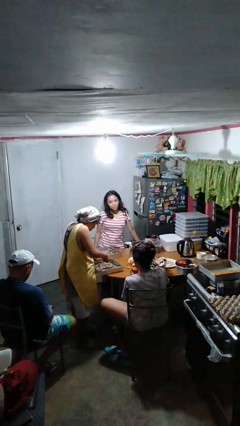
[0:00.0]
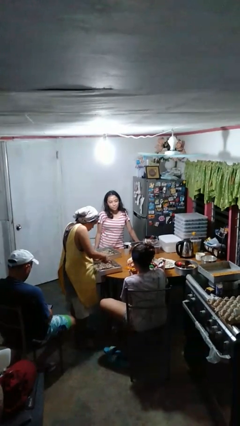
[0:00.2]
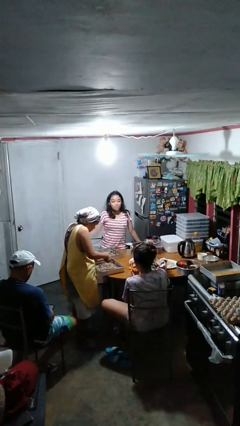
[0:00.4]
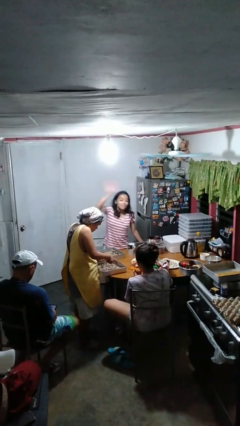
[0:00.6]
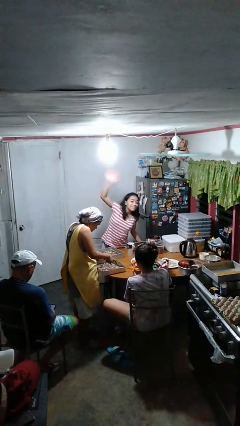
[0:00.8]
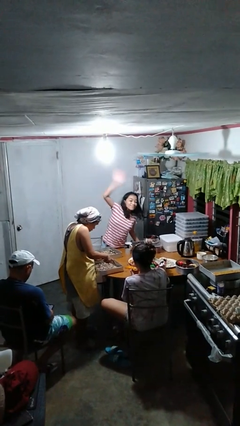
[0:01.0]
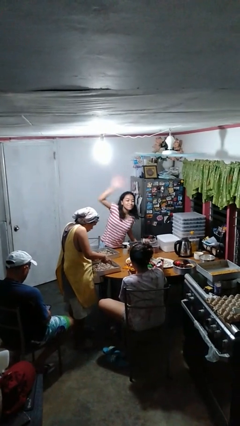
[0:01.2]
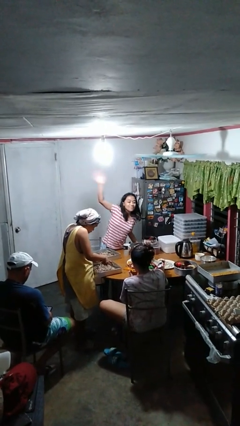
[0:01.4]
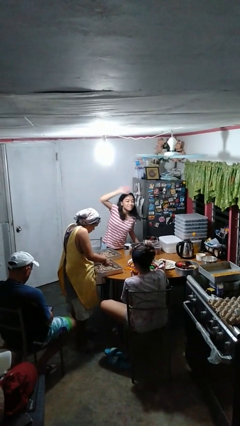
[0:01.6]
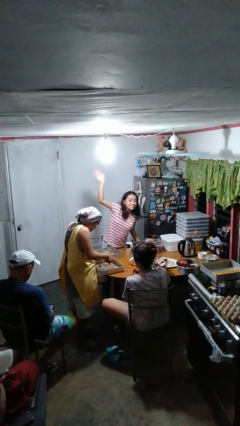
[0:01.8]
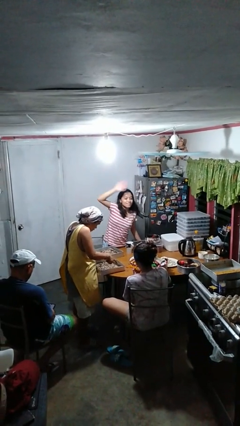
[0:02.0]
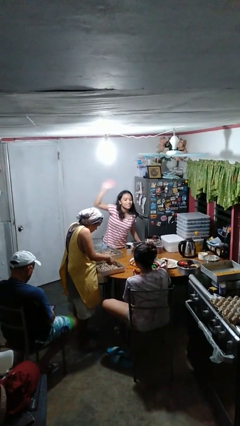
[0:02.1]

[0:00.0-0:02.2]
person waves at person

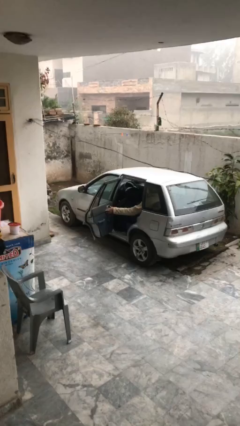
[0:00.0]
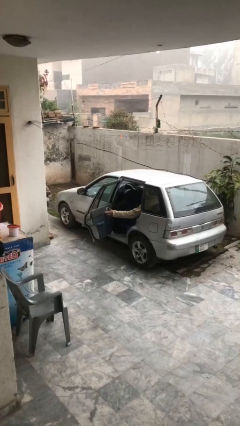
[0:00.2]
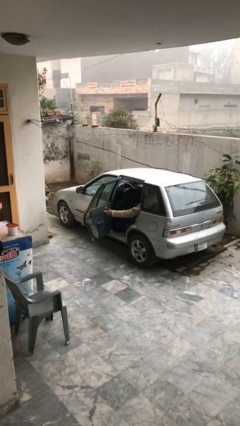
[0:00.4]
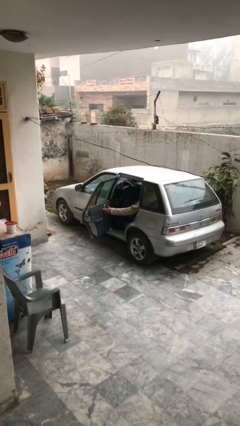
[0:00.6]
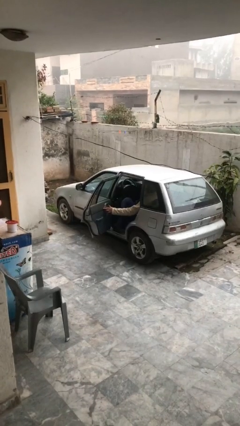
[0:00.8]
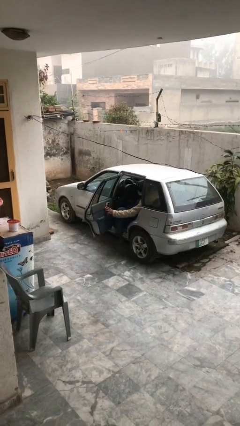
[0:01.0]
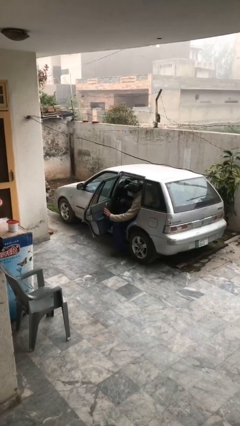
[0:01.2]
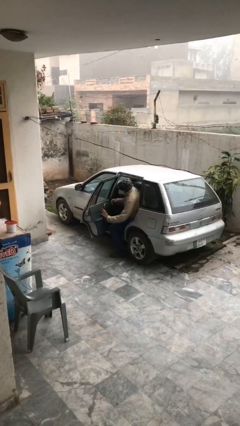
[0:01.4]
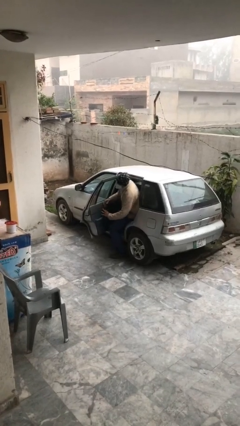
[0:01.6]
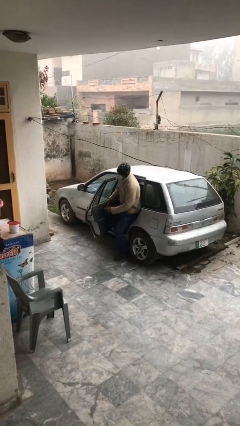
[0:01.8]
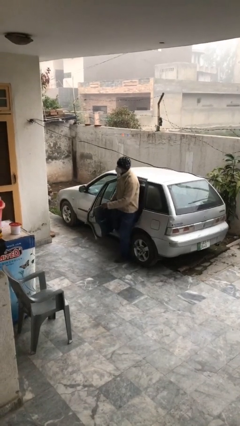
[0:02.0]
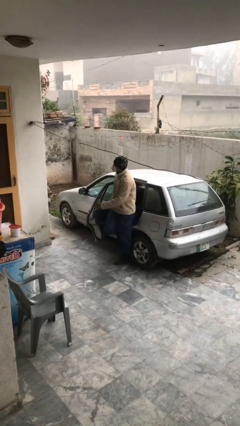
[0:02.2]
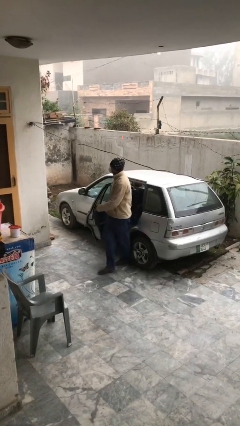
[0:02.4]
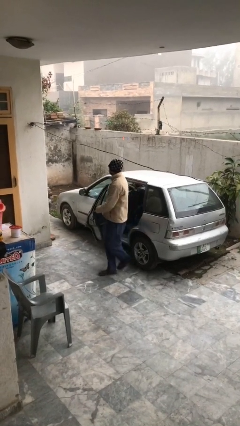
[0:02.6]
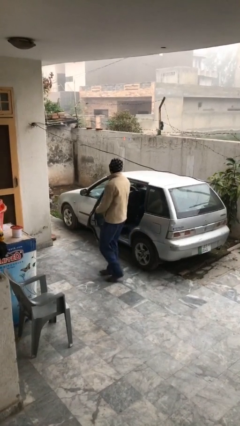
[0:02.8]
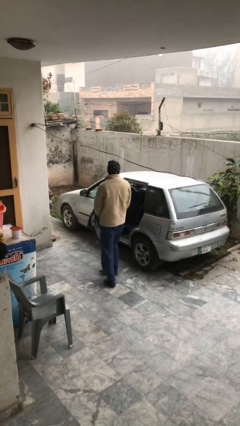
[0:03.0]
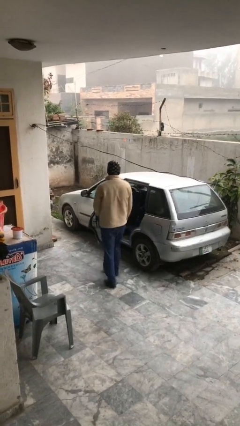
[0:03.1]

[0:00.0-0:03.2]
person exits car

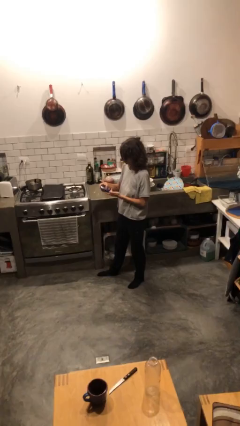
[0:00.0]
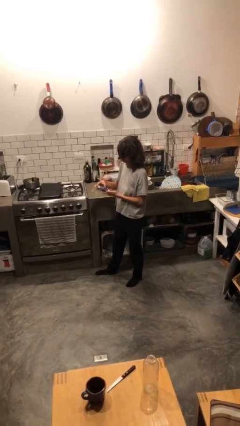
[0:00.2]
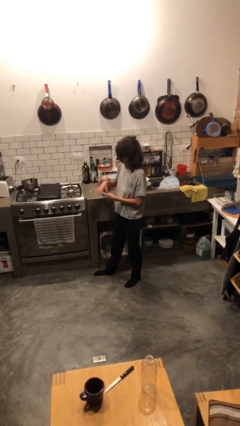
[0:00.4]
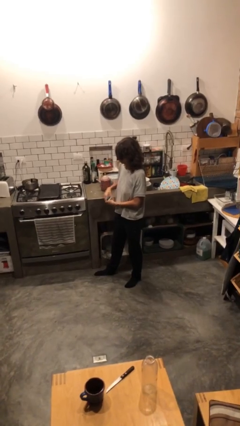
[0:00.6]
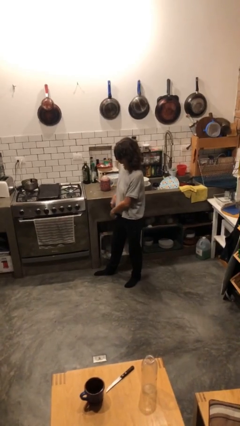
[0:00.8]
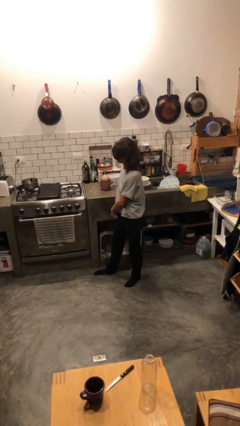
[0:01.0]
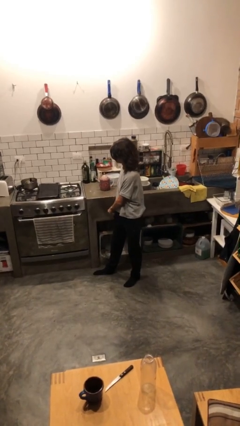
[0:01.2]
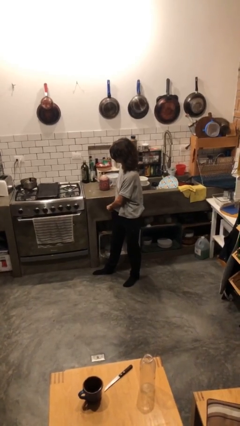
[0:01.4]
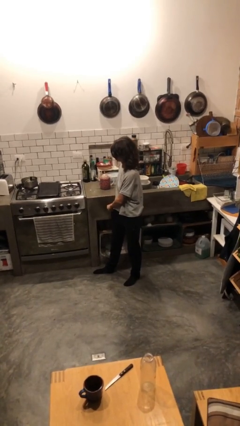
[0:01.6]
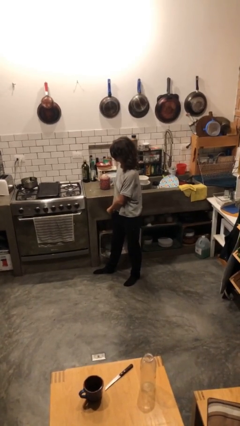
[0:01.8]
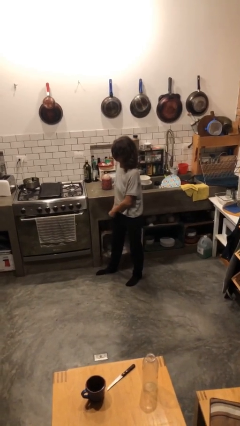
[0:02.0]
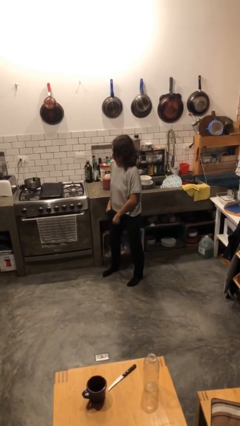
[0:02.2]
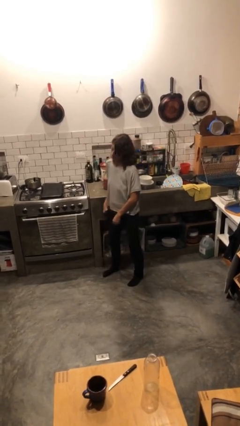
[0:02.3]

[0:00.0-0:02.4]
person puts phone into pocket

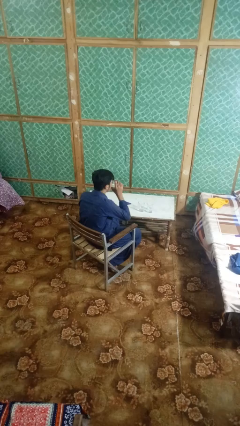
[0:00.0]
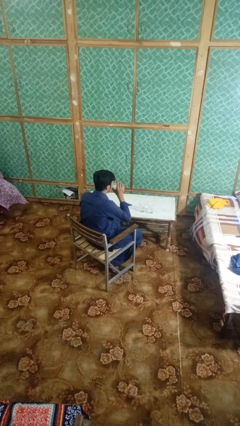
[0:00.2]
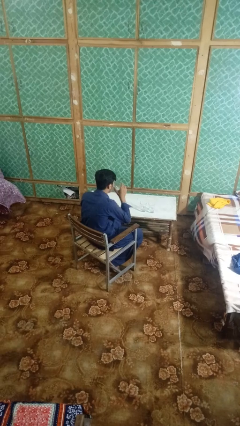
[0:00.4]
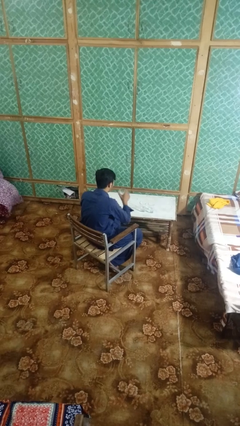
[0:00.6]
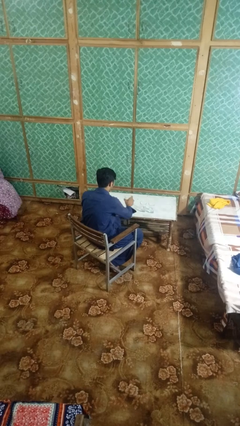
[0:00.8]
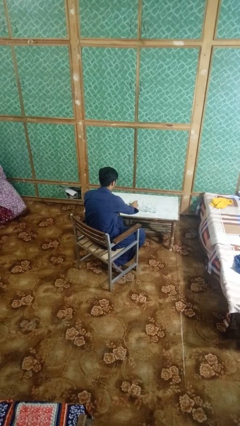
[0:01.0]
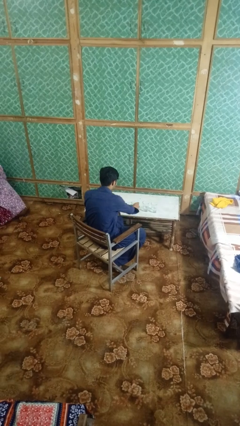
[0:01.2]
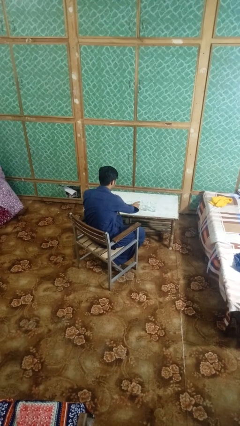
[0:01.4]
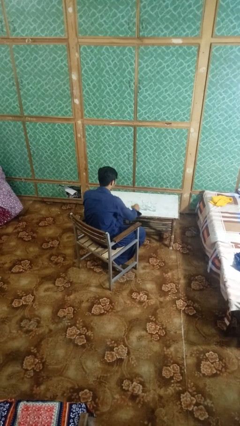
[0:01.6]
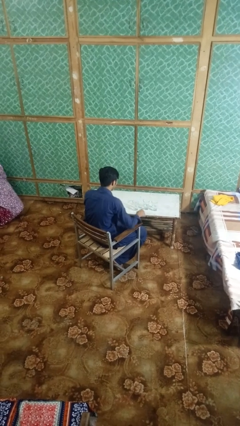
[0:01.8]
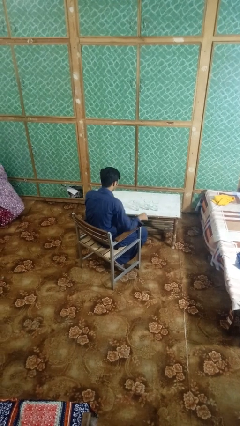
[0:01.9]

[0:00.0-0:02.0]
person puts down object on table

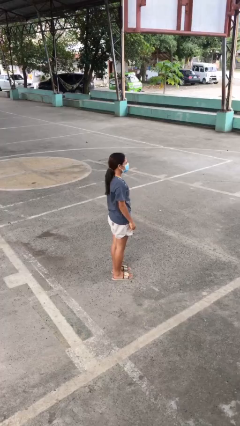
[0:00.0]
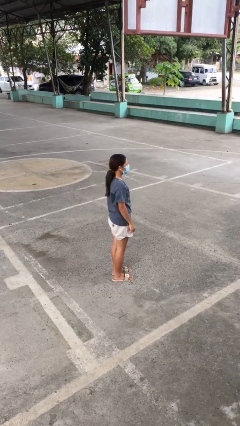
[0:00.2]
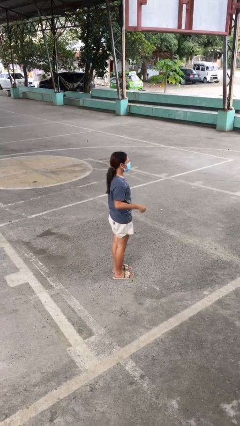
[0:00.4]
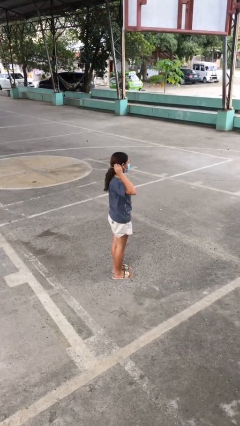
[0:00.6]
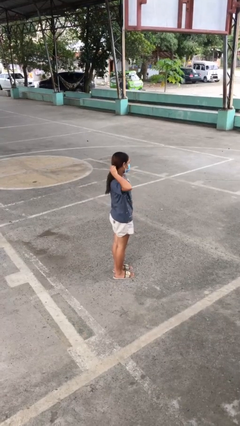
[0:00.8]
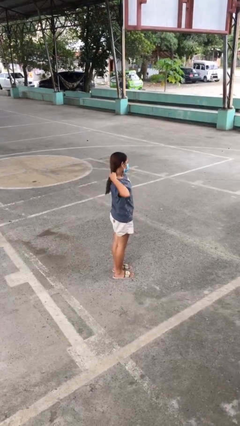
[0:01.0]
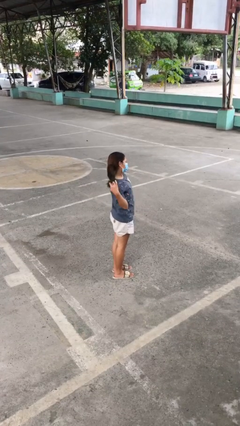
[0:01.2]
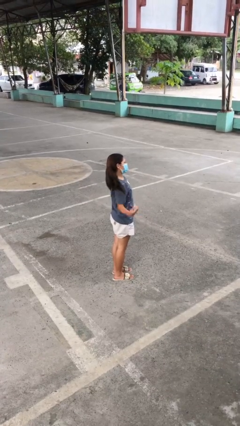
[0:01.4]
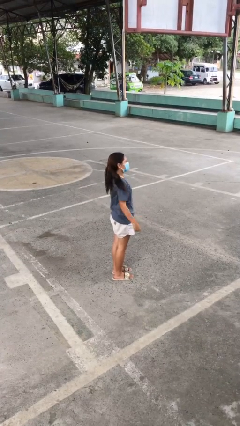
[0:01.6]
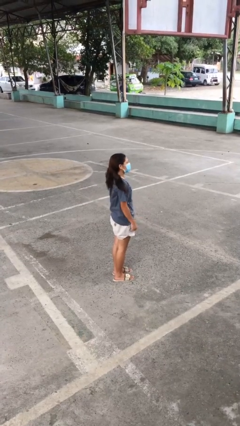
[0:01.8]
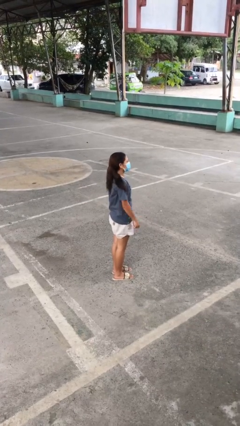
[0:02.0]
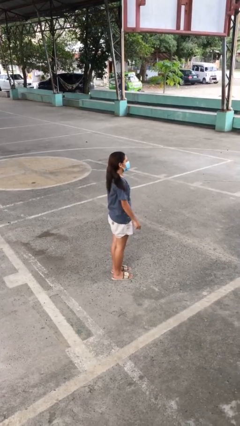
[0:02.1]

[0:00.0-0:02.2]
person takes off hairtie

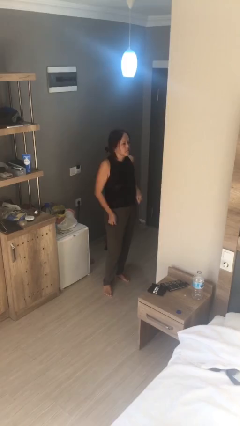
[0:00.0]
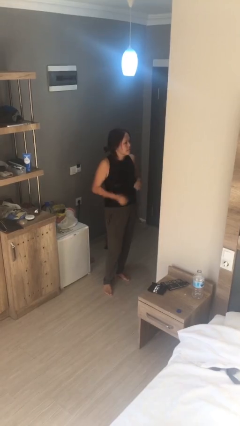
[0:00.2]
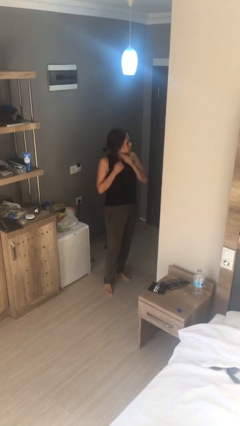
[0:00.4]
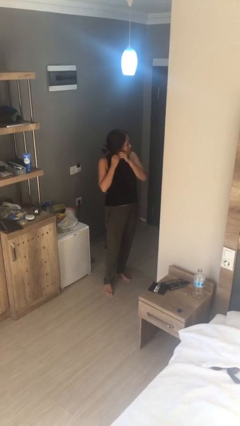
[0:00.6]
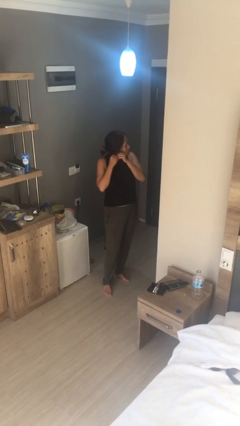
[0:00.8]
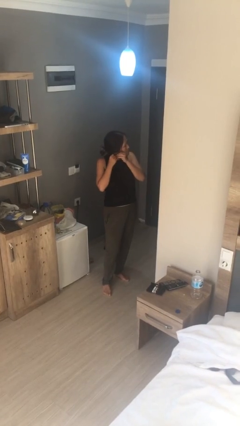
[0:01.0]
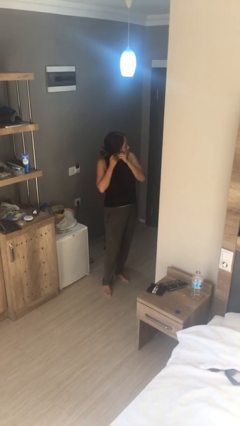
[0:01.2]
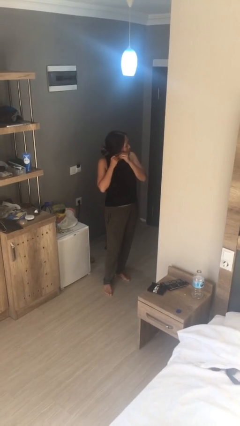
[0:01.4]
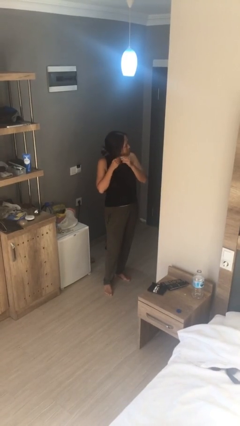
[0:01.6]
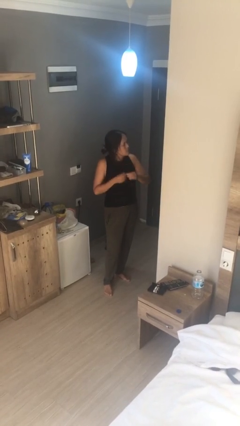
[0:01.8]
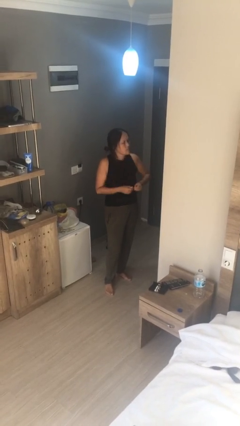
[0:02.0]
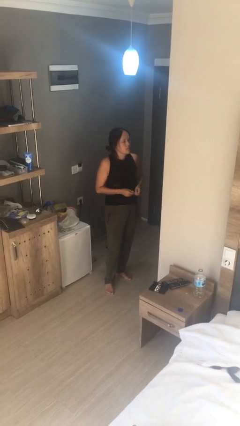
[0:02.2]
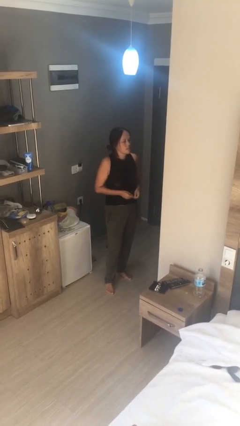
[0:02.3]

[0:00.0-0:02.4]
person takes off earrings

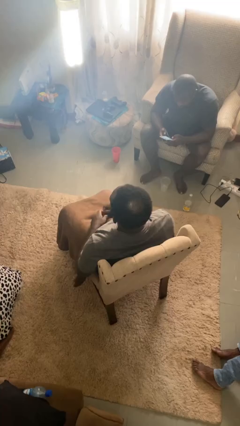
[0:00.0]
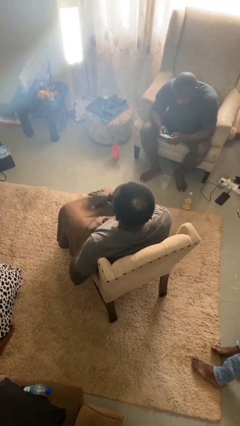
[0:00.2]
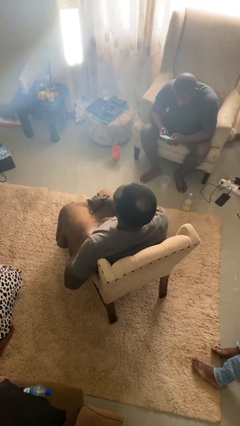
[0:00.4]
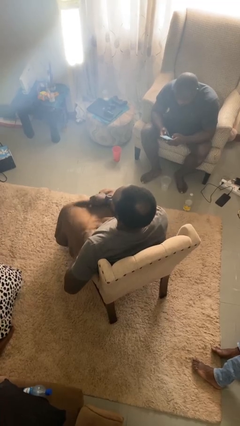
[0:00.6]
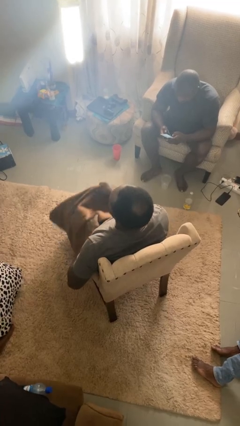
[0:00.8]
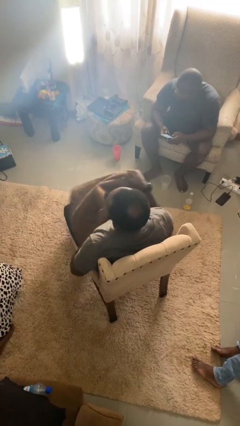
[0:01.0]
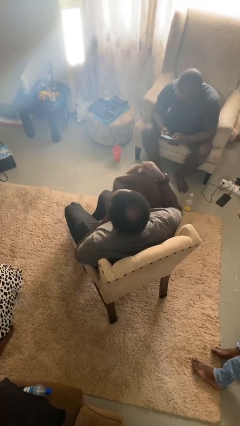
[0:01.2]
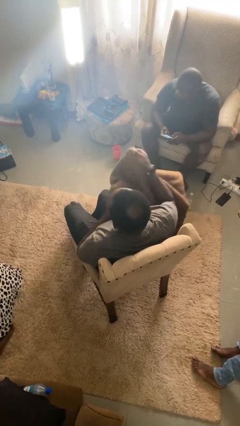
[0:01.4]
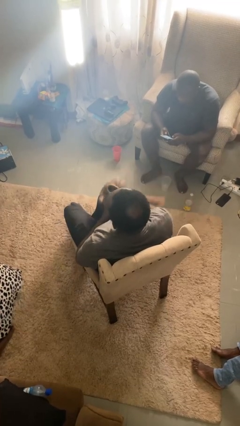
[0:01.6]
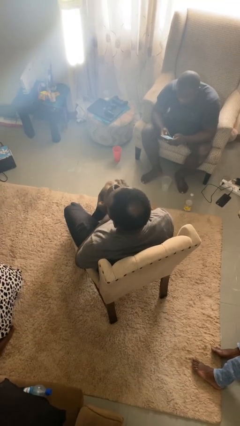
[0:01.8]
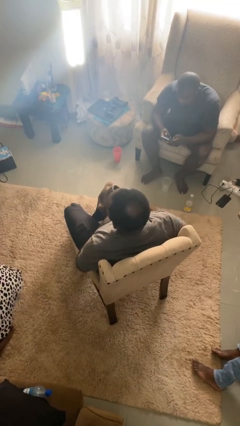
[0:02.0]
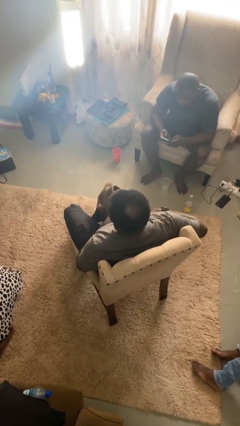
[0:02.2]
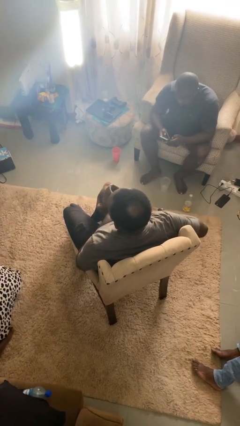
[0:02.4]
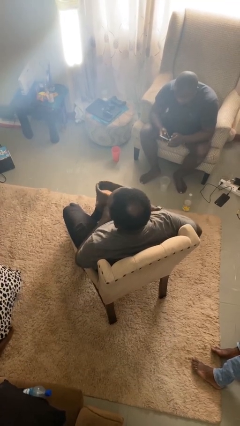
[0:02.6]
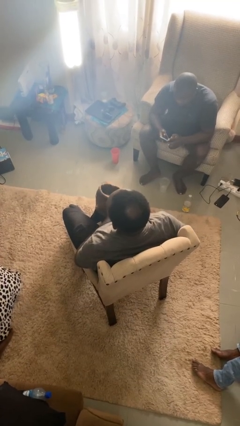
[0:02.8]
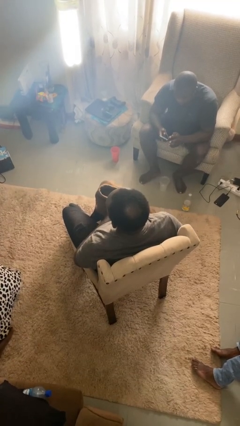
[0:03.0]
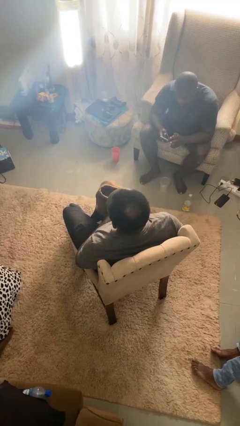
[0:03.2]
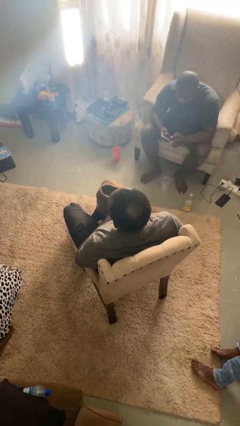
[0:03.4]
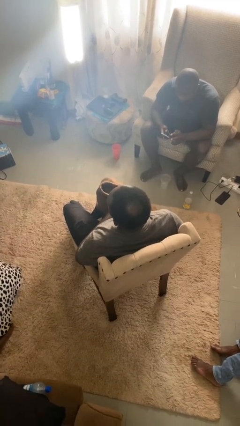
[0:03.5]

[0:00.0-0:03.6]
person uncovers with blanket
